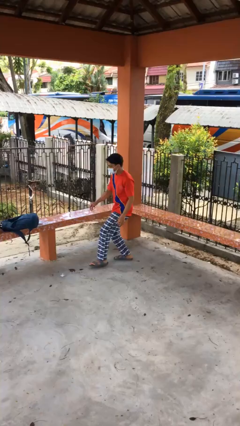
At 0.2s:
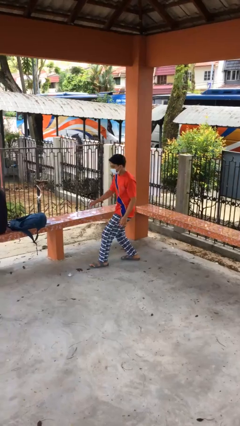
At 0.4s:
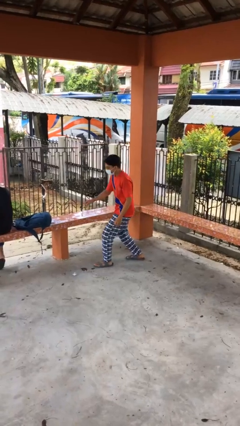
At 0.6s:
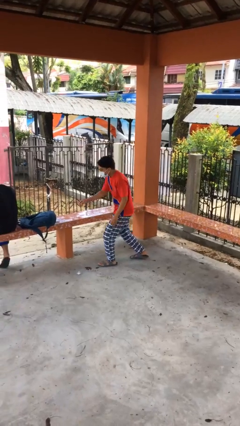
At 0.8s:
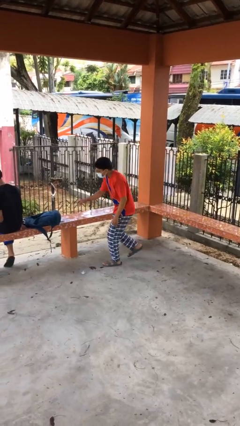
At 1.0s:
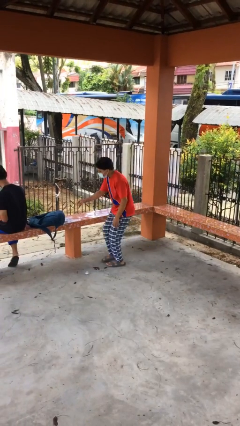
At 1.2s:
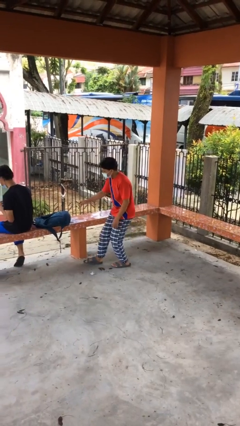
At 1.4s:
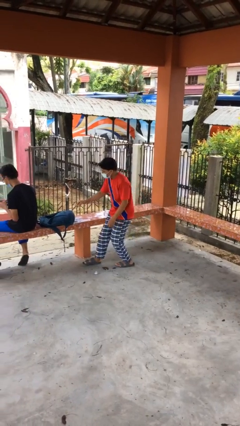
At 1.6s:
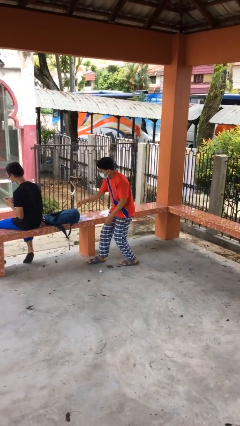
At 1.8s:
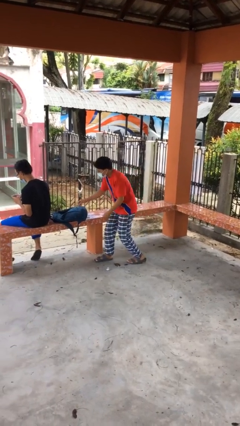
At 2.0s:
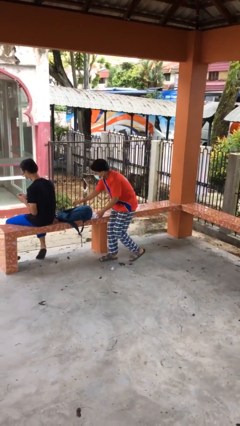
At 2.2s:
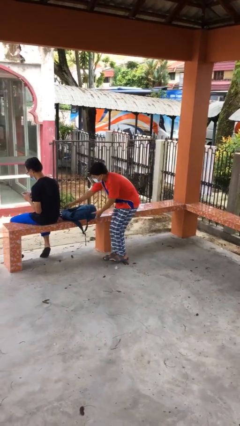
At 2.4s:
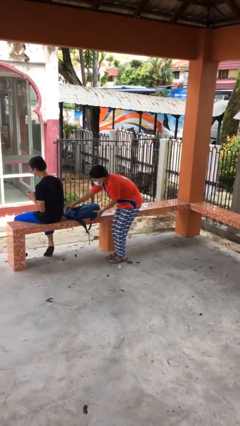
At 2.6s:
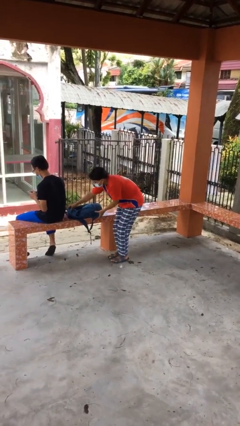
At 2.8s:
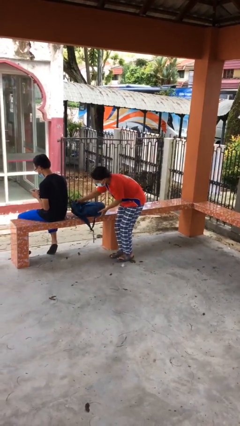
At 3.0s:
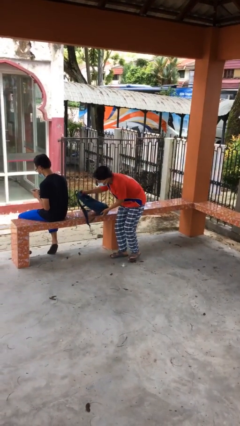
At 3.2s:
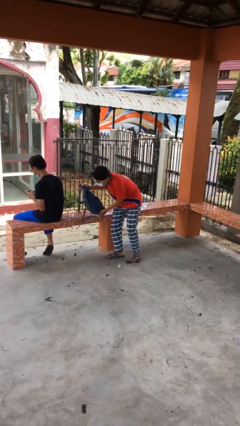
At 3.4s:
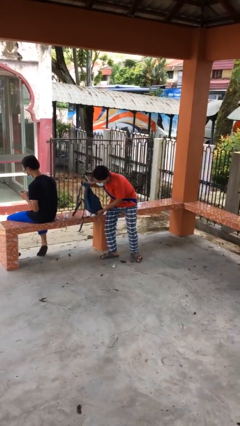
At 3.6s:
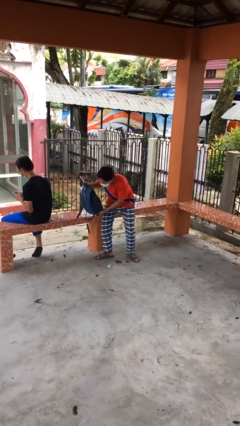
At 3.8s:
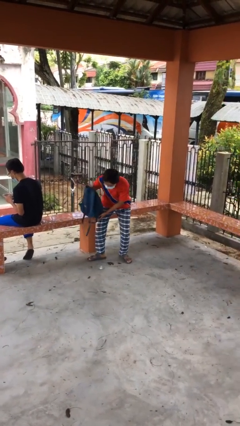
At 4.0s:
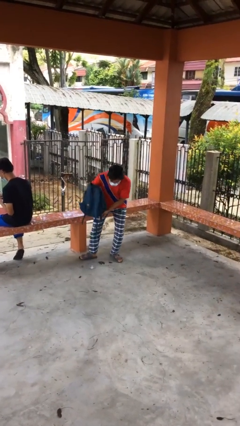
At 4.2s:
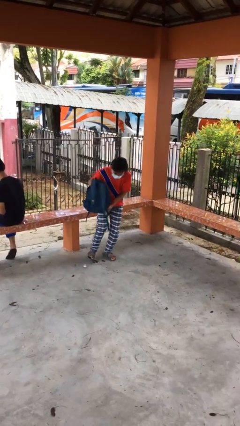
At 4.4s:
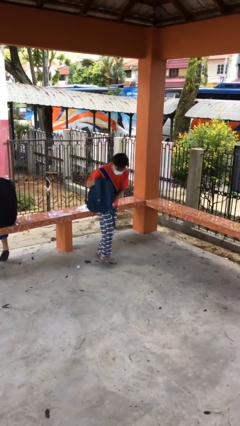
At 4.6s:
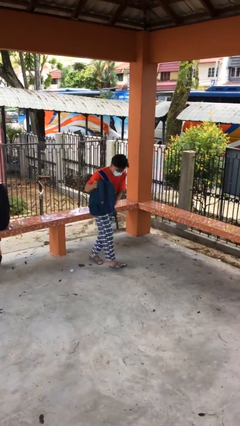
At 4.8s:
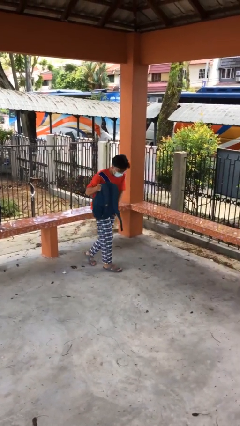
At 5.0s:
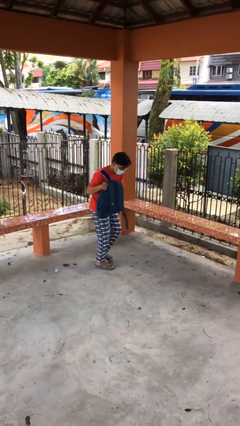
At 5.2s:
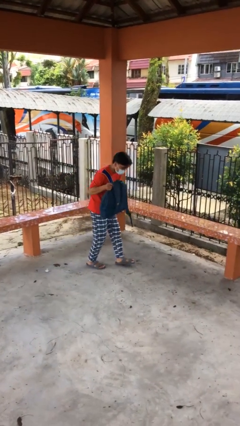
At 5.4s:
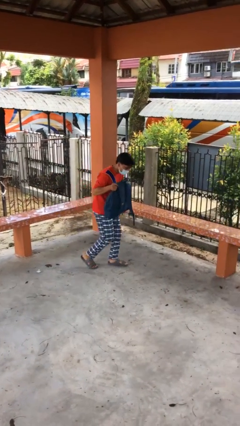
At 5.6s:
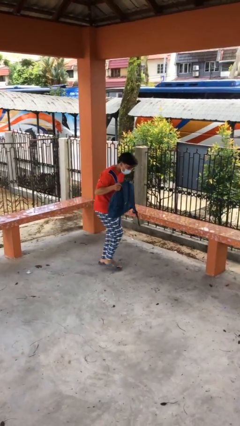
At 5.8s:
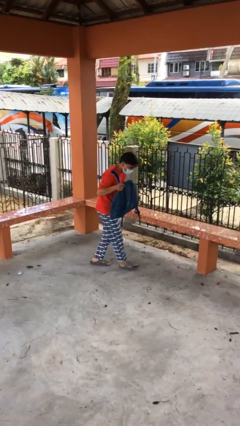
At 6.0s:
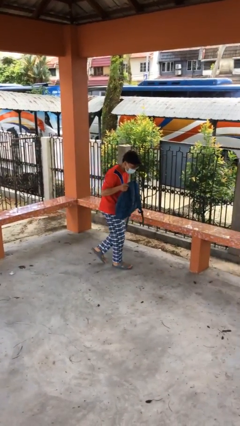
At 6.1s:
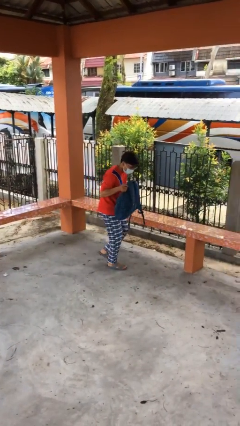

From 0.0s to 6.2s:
person steals object from person

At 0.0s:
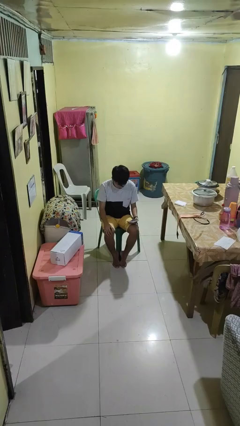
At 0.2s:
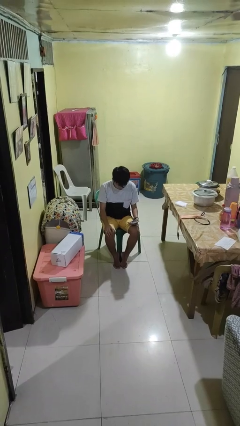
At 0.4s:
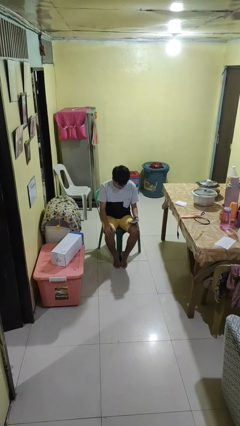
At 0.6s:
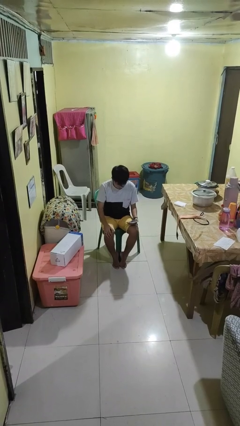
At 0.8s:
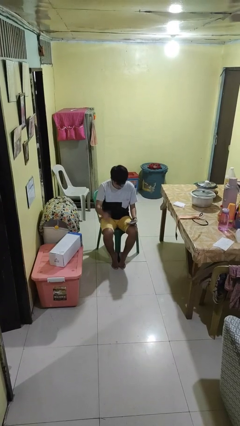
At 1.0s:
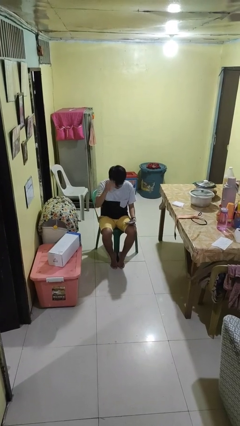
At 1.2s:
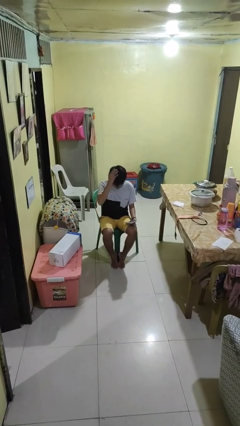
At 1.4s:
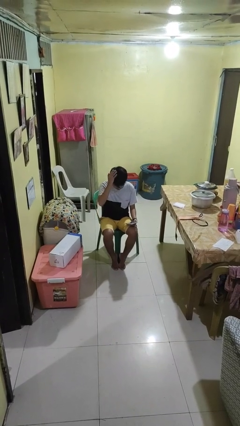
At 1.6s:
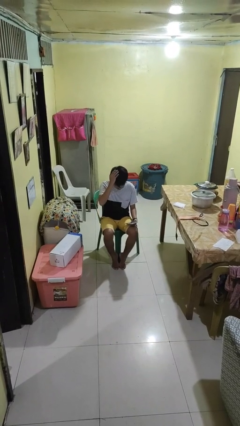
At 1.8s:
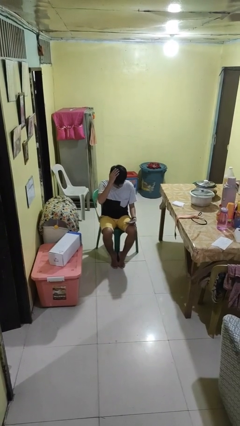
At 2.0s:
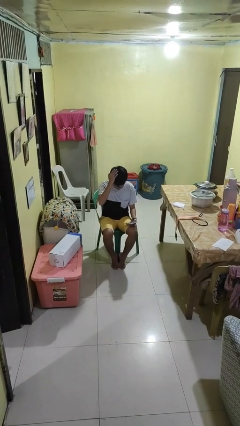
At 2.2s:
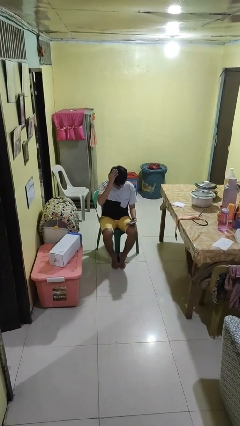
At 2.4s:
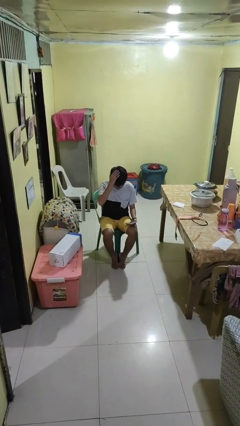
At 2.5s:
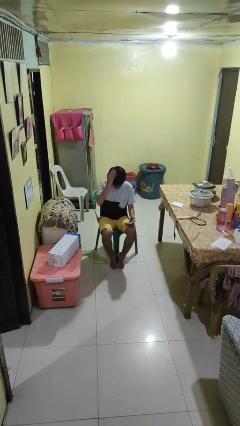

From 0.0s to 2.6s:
person pats head

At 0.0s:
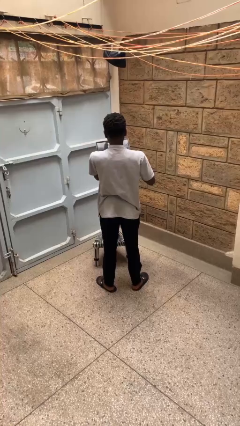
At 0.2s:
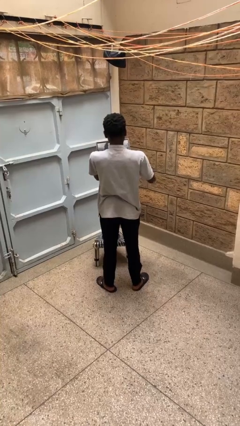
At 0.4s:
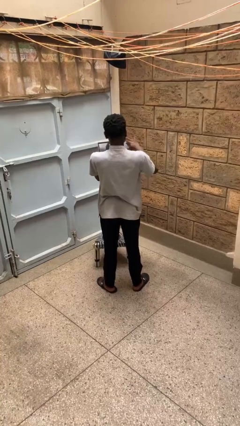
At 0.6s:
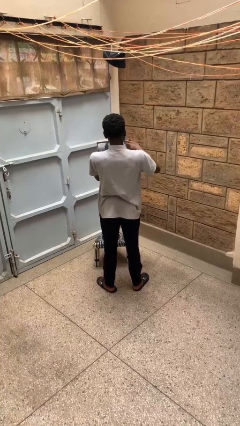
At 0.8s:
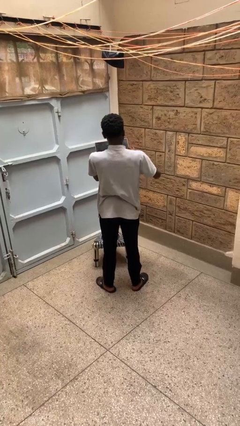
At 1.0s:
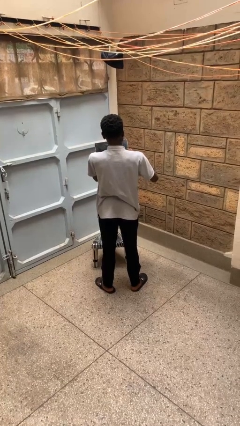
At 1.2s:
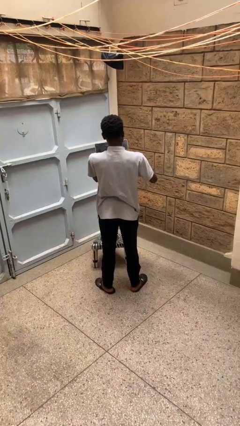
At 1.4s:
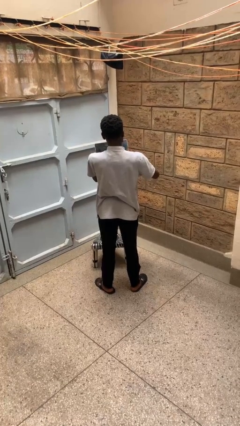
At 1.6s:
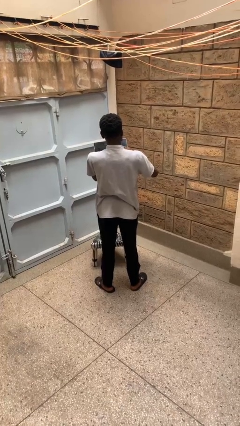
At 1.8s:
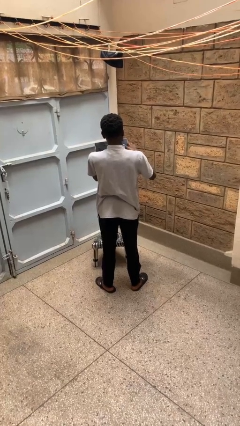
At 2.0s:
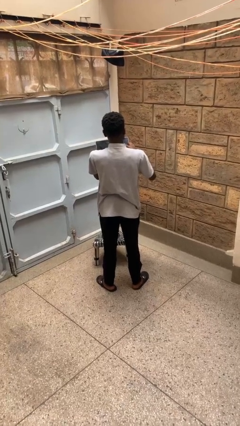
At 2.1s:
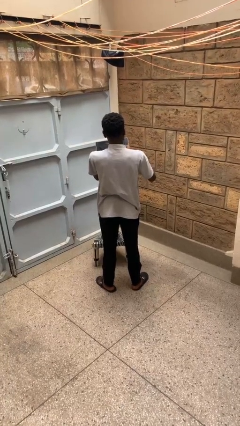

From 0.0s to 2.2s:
person interacts with tablet

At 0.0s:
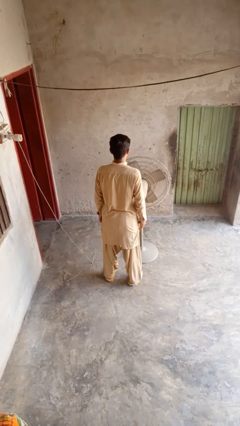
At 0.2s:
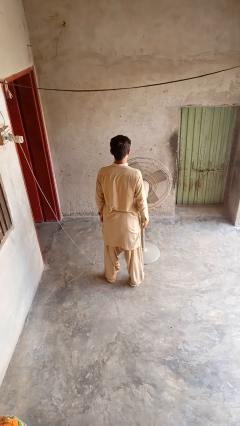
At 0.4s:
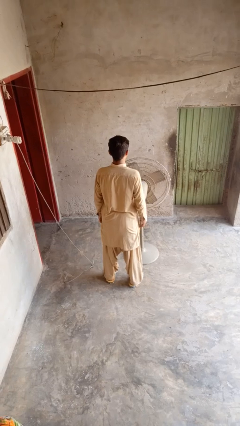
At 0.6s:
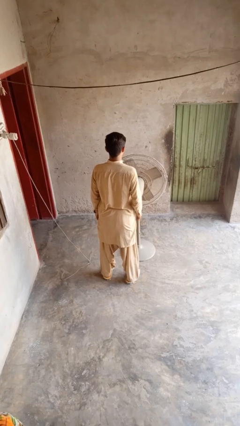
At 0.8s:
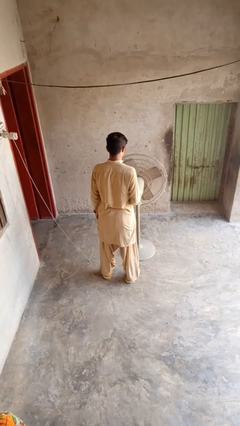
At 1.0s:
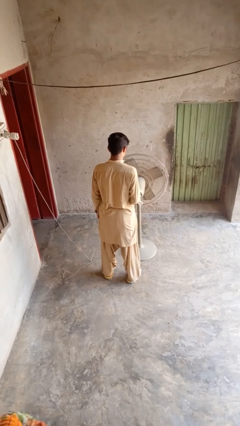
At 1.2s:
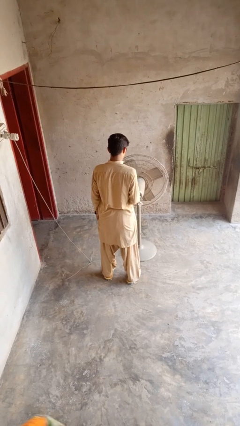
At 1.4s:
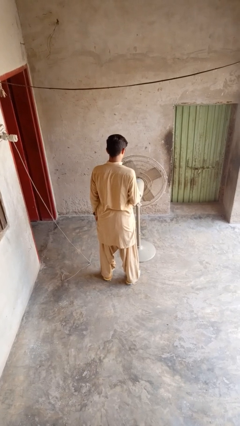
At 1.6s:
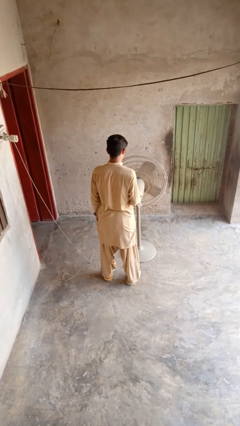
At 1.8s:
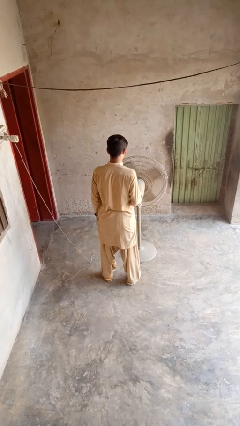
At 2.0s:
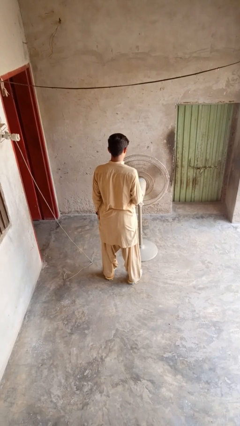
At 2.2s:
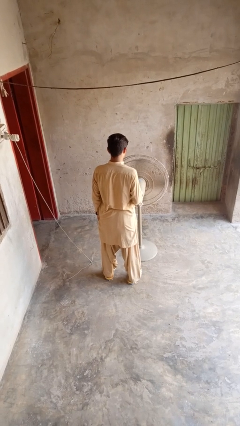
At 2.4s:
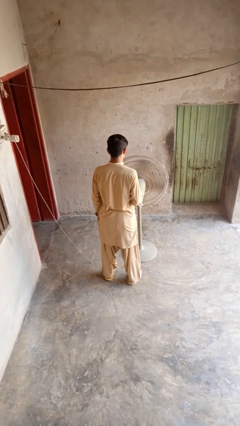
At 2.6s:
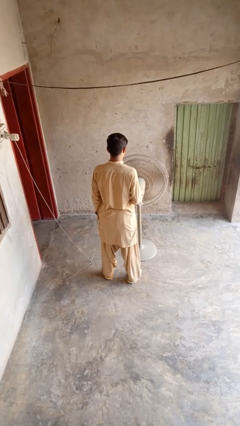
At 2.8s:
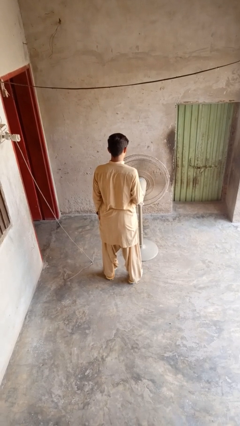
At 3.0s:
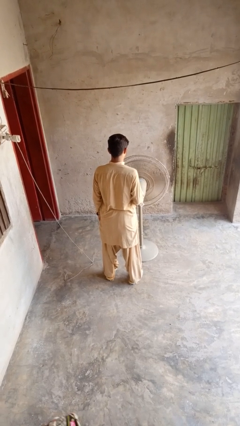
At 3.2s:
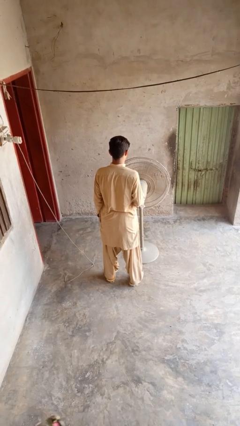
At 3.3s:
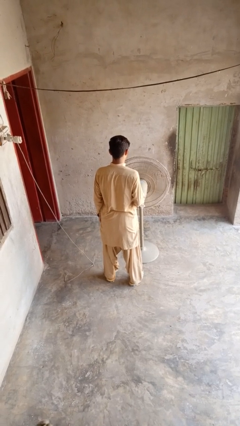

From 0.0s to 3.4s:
person turns on fan

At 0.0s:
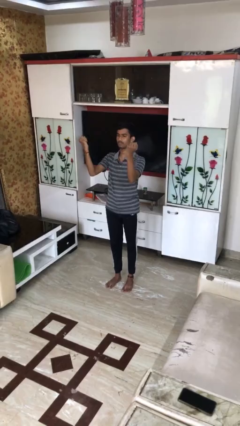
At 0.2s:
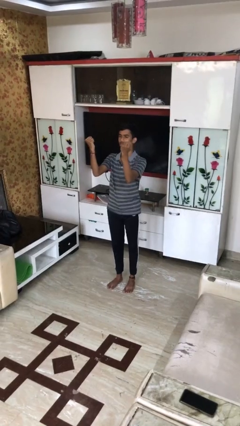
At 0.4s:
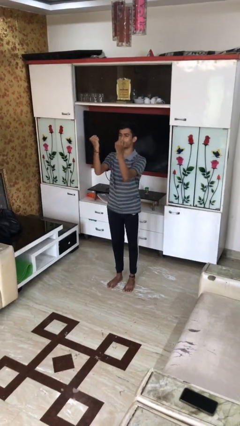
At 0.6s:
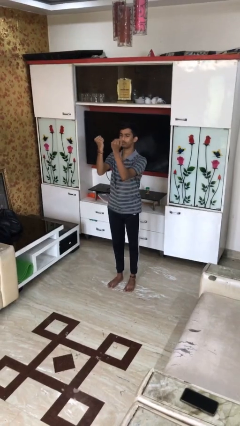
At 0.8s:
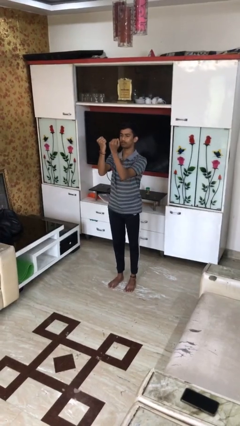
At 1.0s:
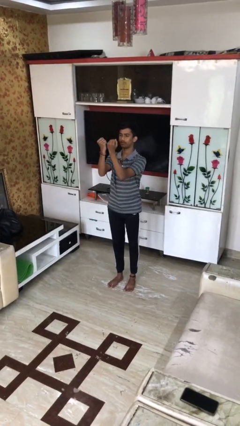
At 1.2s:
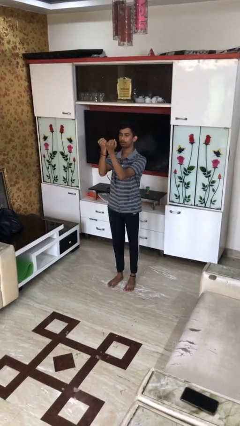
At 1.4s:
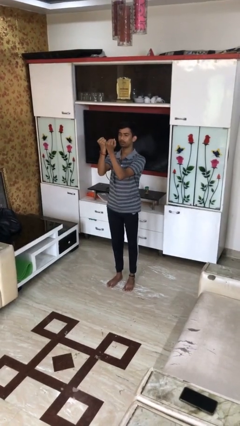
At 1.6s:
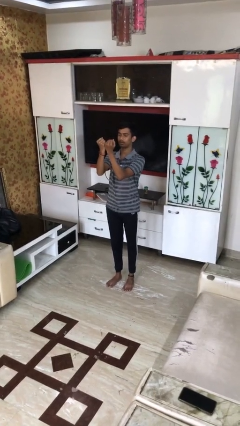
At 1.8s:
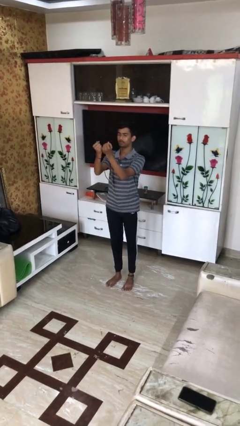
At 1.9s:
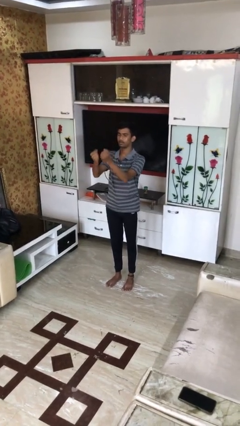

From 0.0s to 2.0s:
person gestures zoom out

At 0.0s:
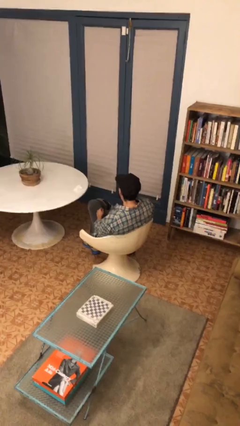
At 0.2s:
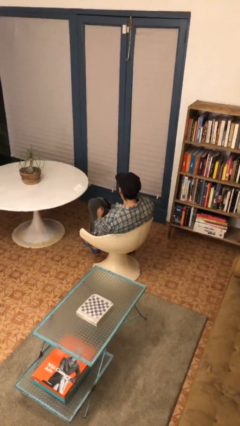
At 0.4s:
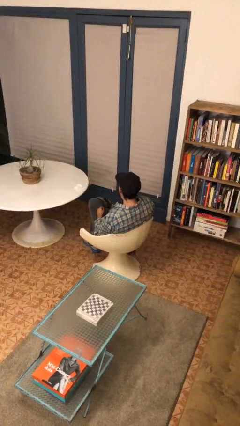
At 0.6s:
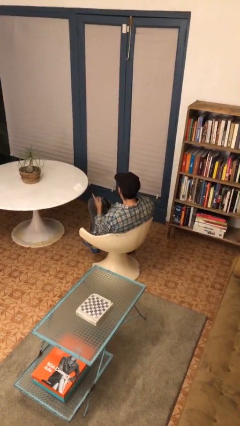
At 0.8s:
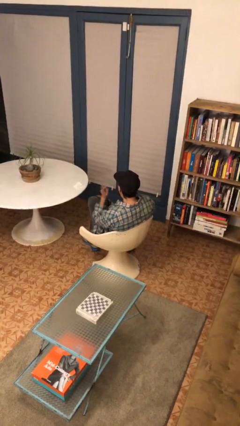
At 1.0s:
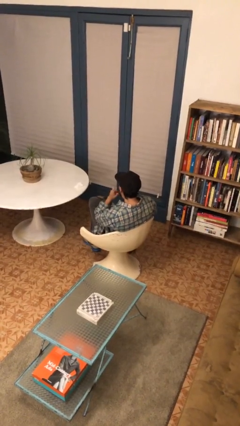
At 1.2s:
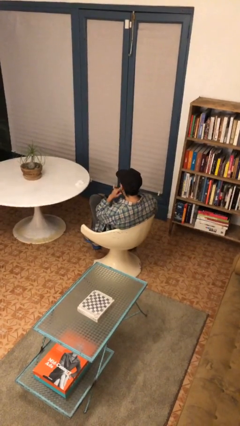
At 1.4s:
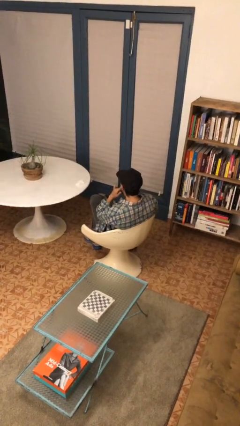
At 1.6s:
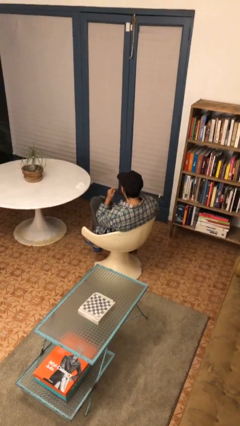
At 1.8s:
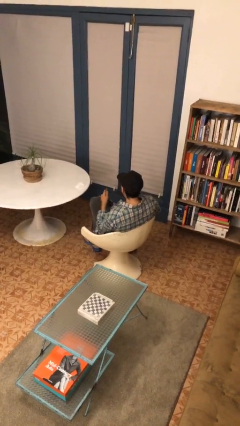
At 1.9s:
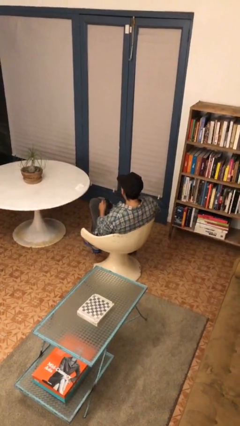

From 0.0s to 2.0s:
person gestures listen closely
